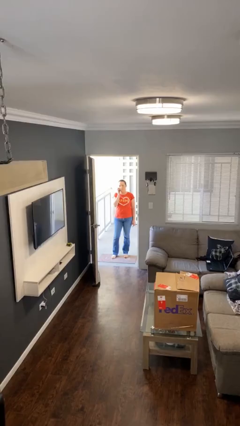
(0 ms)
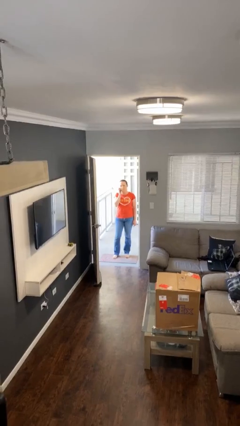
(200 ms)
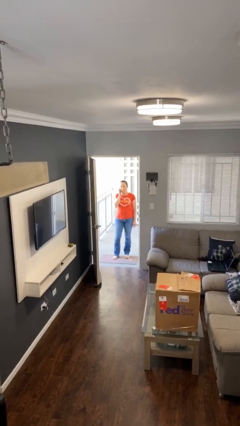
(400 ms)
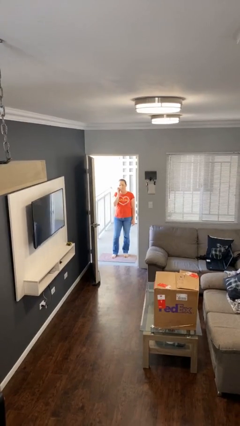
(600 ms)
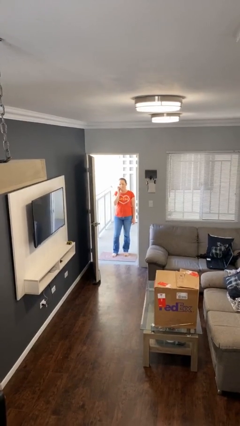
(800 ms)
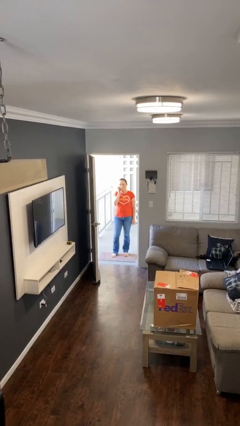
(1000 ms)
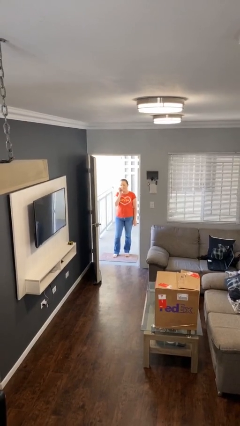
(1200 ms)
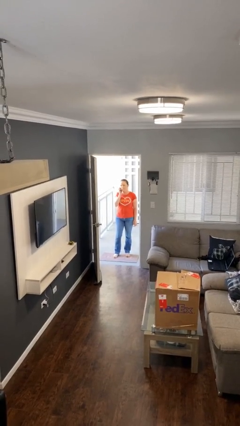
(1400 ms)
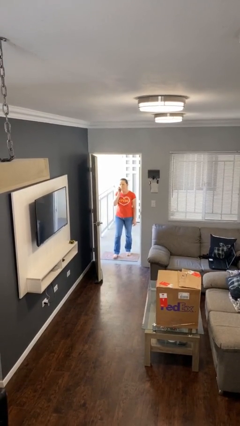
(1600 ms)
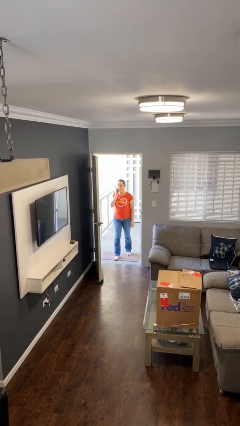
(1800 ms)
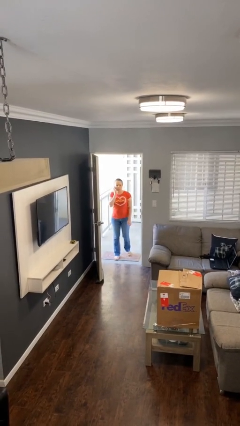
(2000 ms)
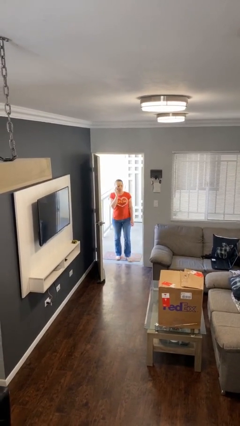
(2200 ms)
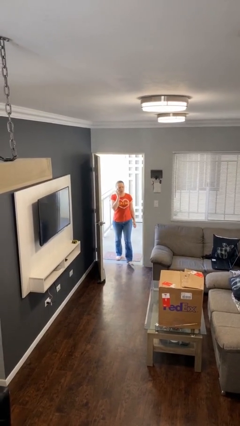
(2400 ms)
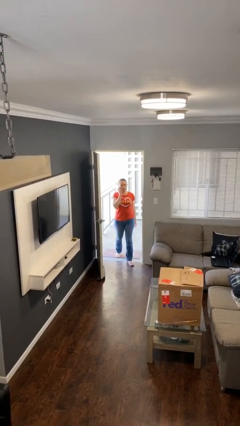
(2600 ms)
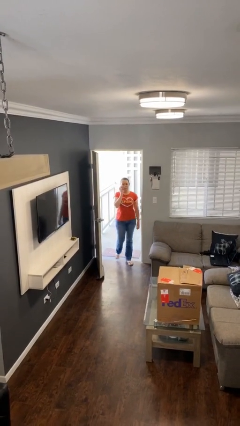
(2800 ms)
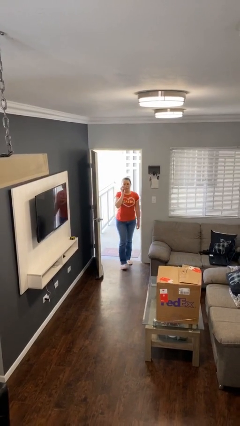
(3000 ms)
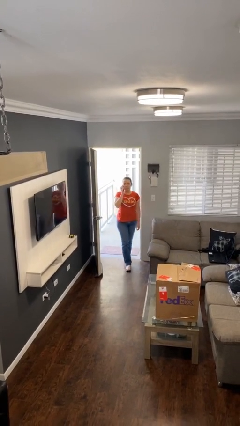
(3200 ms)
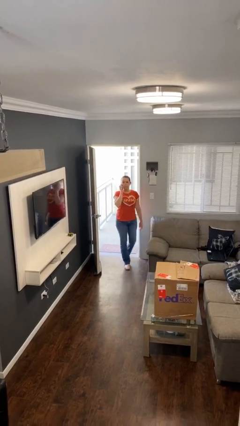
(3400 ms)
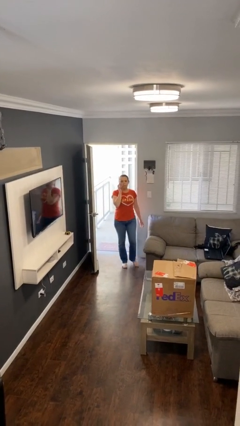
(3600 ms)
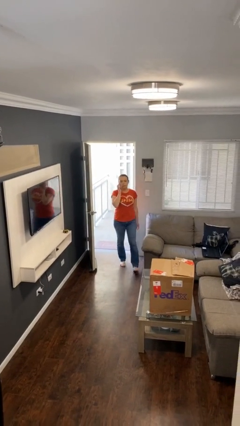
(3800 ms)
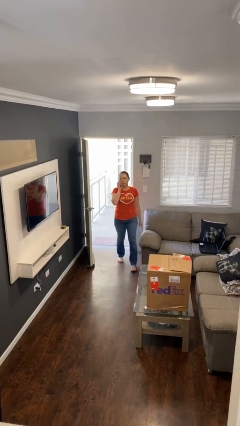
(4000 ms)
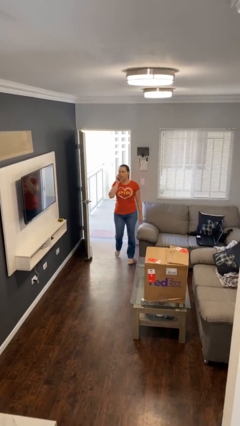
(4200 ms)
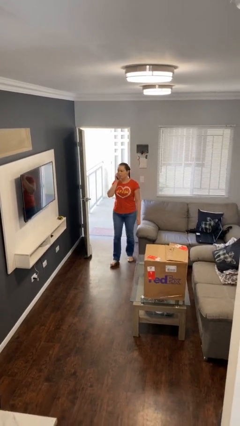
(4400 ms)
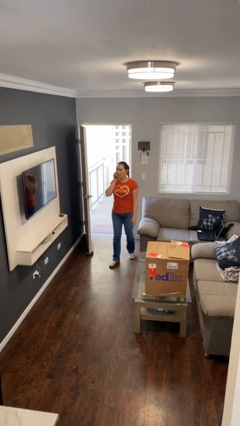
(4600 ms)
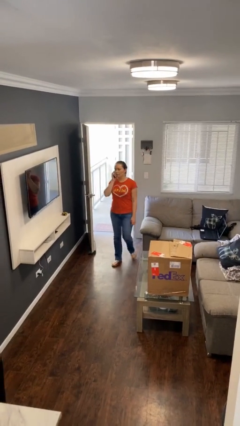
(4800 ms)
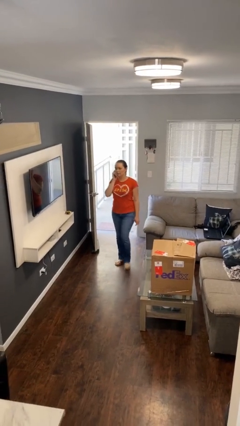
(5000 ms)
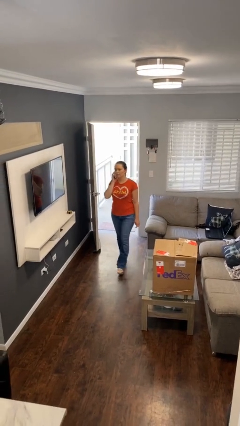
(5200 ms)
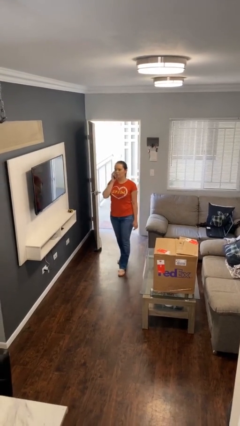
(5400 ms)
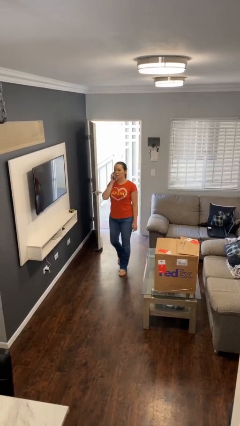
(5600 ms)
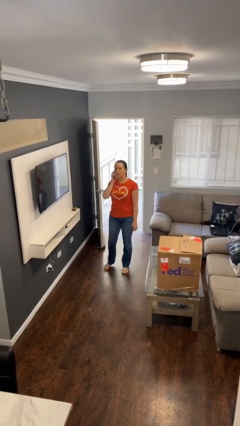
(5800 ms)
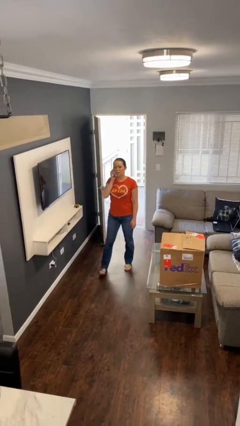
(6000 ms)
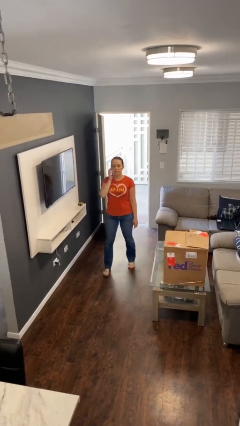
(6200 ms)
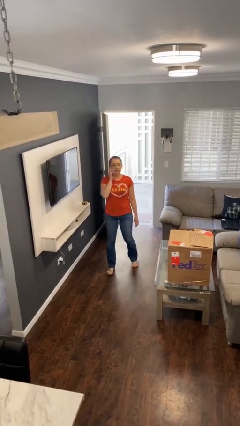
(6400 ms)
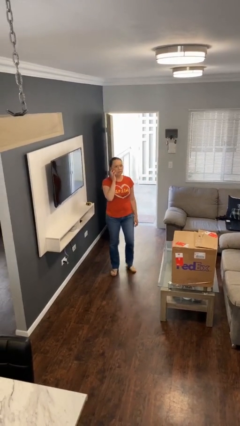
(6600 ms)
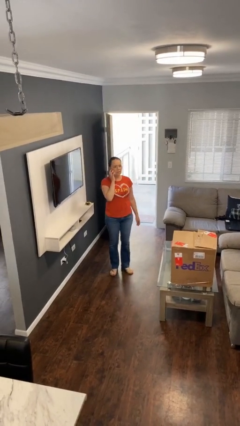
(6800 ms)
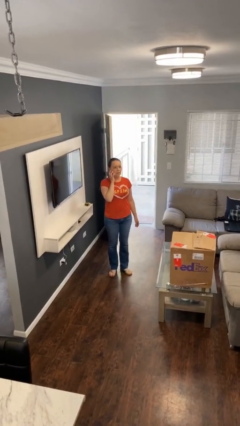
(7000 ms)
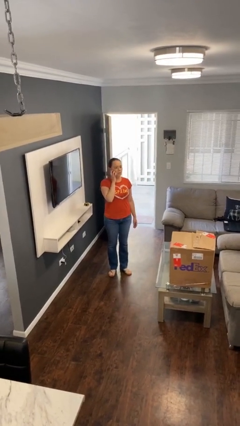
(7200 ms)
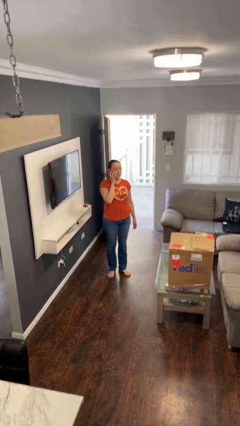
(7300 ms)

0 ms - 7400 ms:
person enters scene through structure

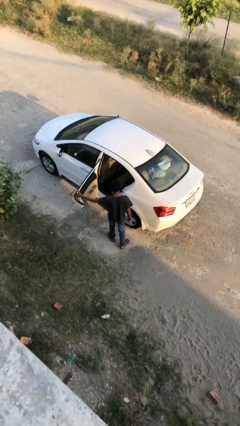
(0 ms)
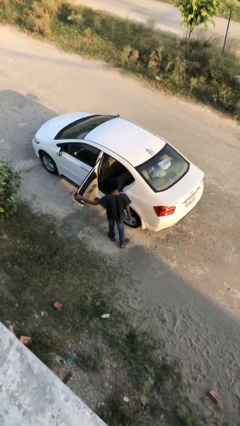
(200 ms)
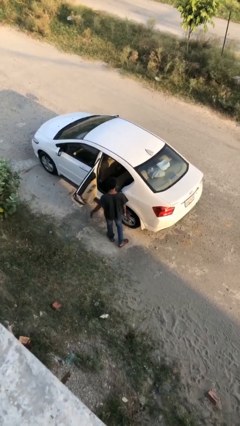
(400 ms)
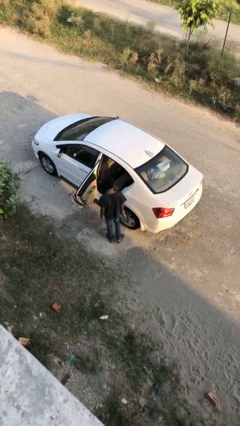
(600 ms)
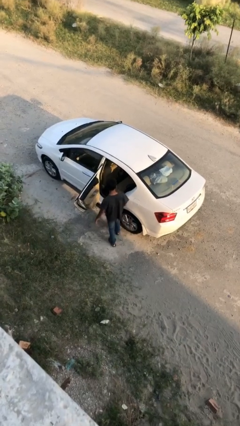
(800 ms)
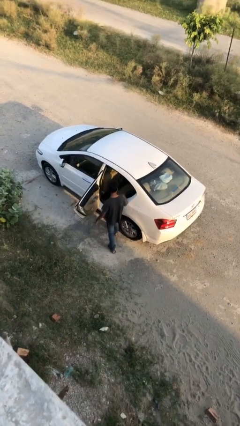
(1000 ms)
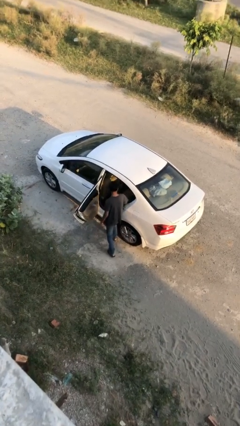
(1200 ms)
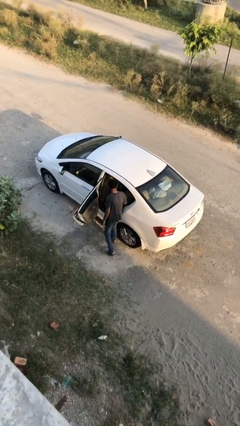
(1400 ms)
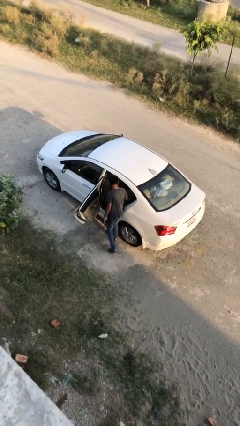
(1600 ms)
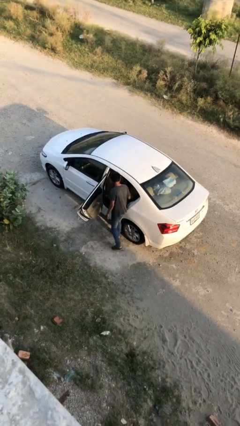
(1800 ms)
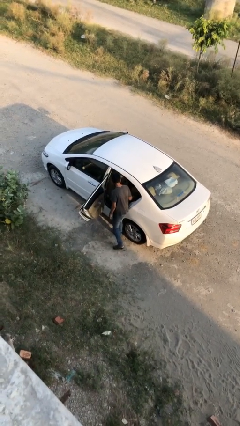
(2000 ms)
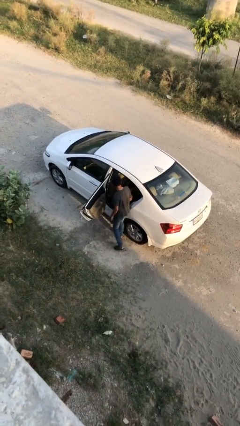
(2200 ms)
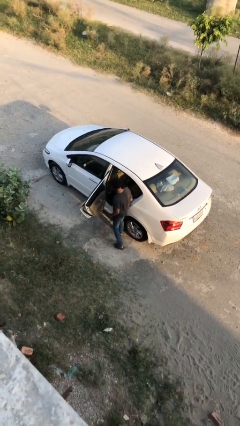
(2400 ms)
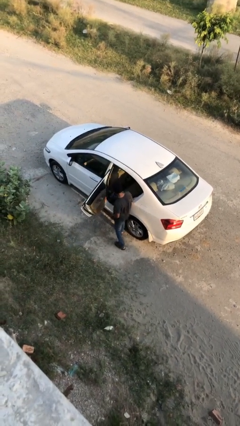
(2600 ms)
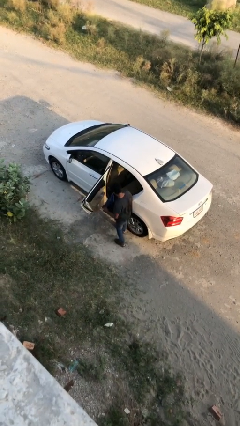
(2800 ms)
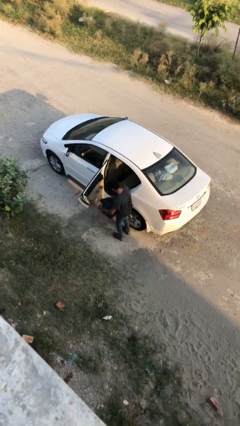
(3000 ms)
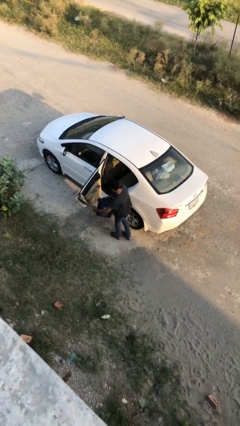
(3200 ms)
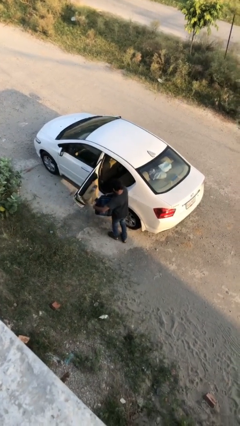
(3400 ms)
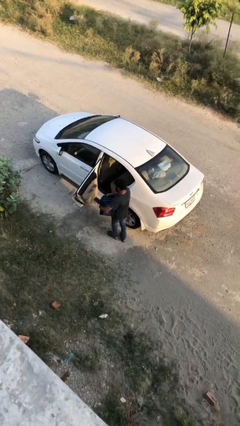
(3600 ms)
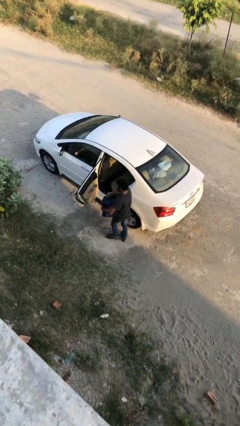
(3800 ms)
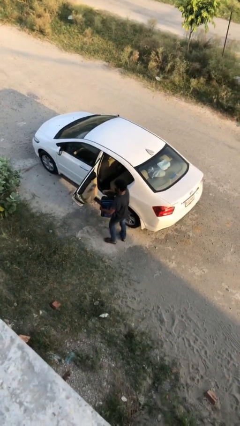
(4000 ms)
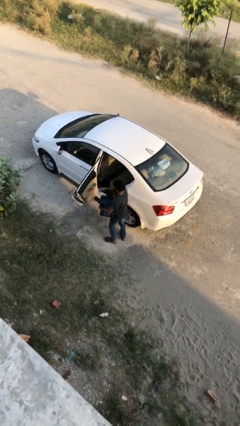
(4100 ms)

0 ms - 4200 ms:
person unloads car

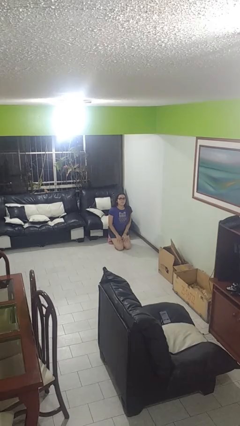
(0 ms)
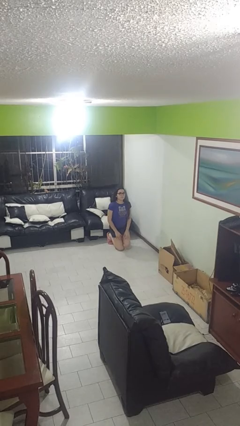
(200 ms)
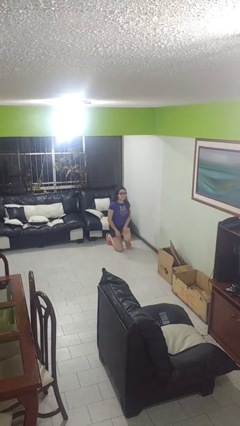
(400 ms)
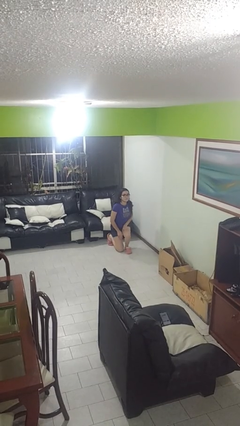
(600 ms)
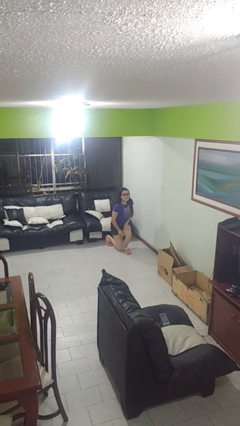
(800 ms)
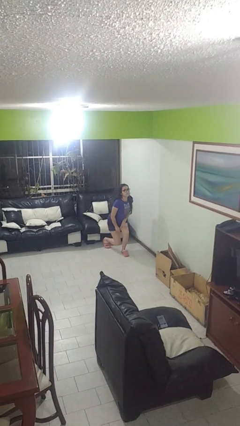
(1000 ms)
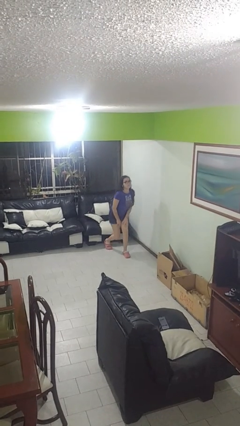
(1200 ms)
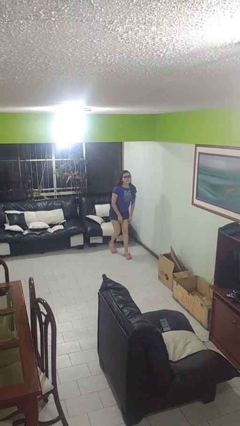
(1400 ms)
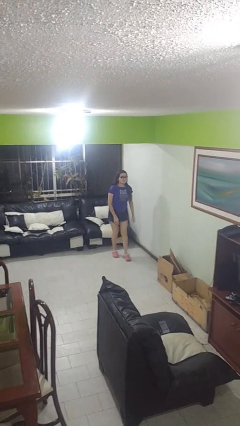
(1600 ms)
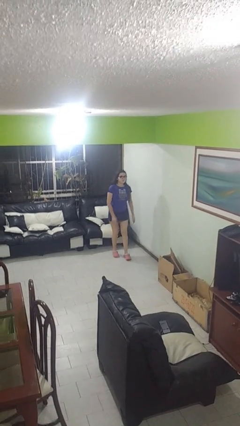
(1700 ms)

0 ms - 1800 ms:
person stands up from floor

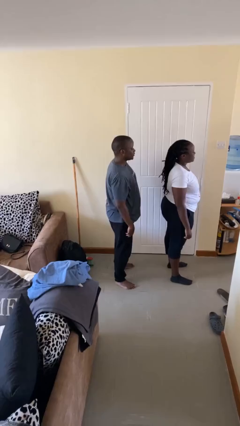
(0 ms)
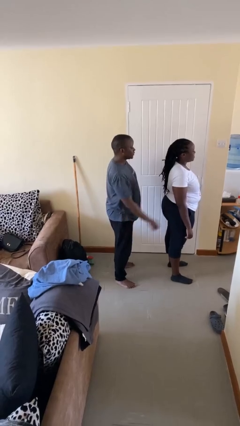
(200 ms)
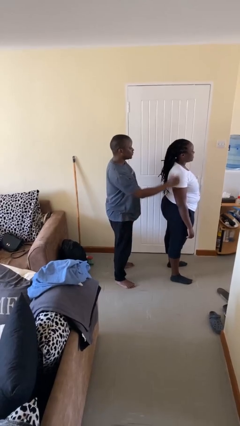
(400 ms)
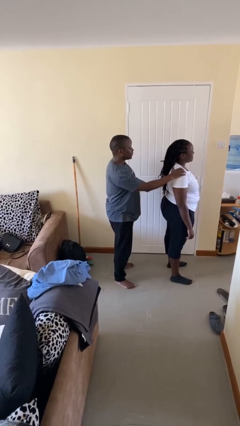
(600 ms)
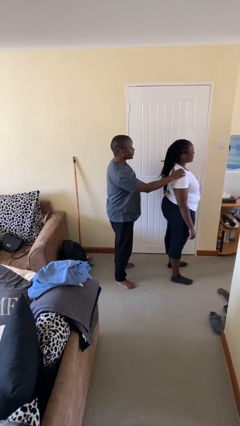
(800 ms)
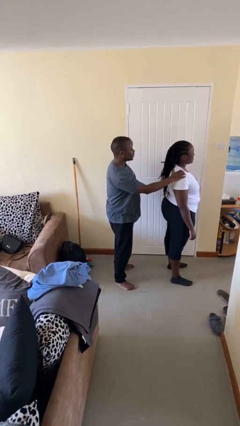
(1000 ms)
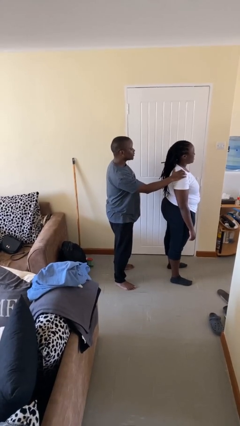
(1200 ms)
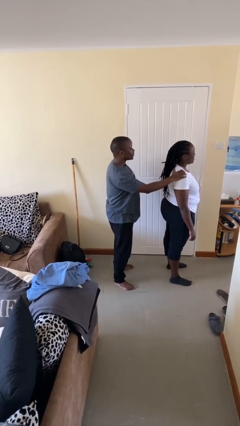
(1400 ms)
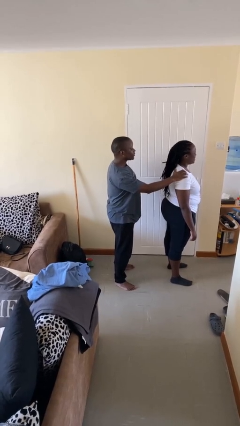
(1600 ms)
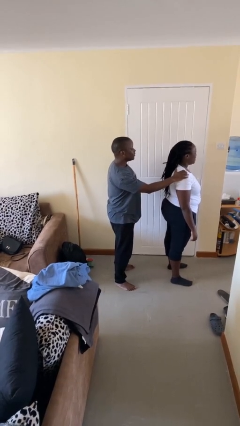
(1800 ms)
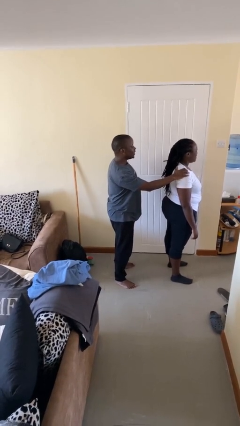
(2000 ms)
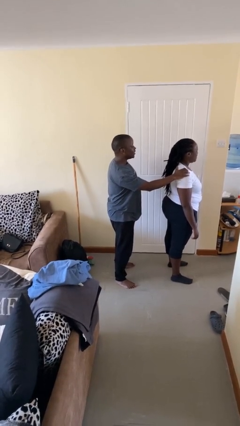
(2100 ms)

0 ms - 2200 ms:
person grabs person by shoulder

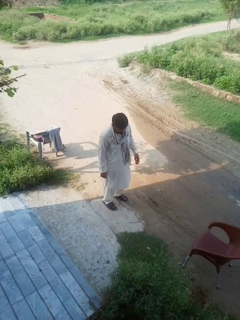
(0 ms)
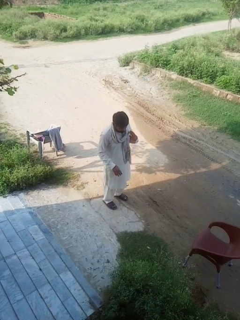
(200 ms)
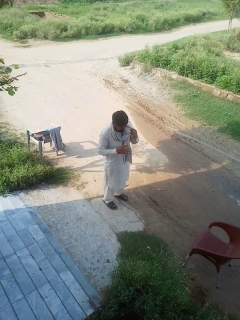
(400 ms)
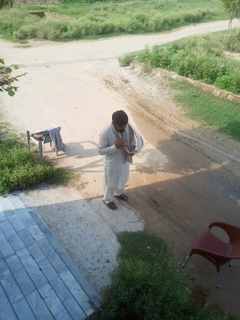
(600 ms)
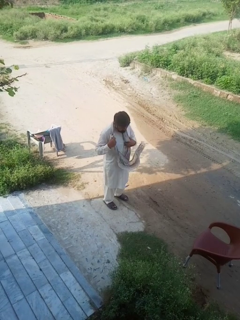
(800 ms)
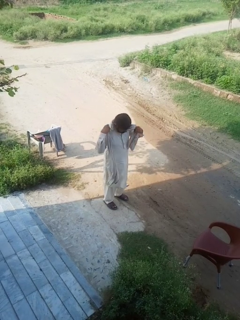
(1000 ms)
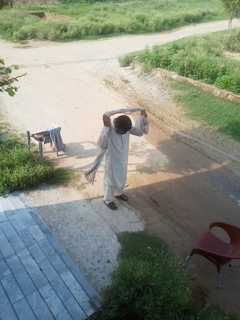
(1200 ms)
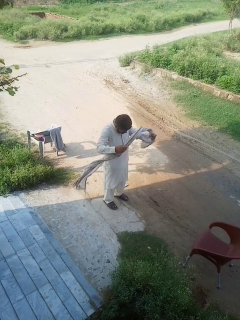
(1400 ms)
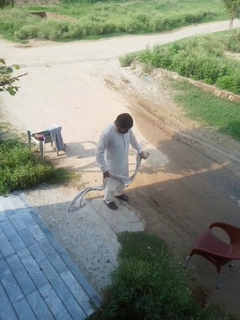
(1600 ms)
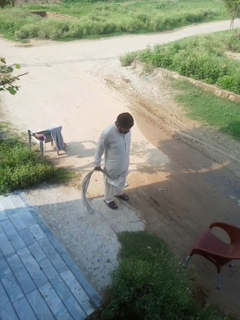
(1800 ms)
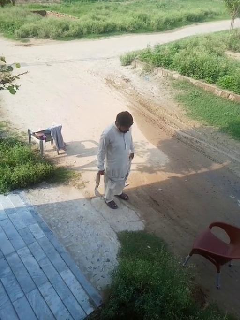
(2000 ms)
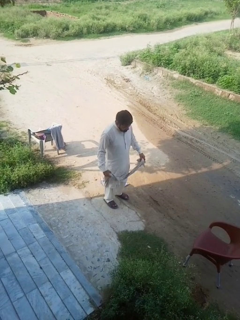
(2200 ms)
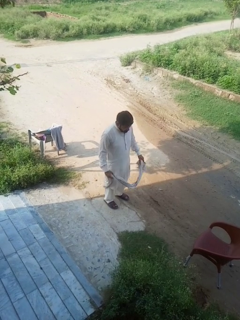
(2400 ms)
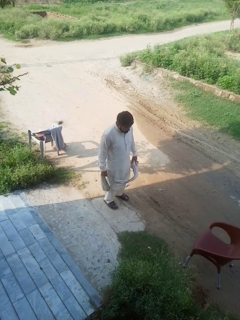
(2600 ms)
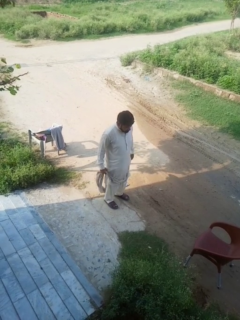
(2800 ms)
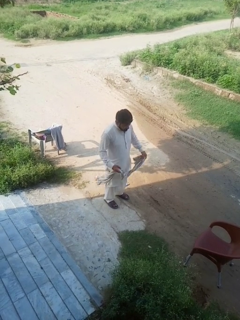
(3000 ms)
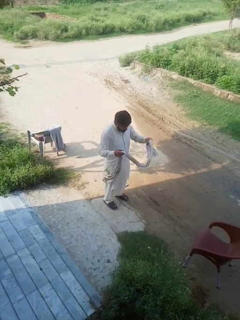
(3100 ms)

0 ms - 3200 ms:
person takes off scarf
